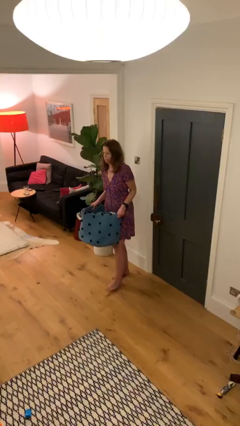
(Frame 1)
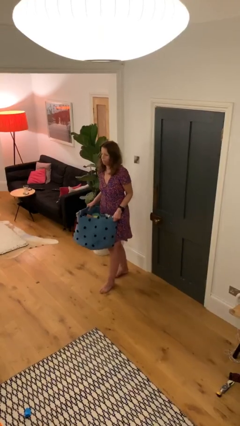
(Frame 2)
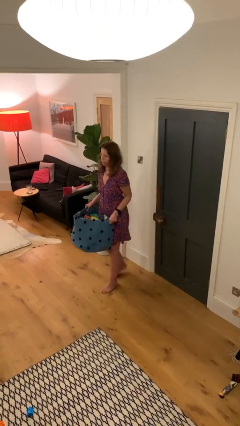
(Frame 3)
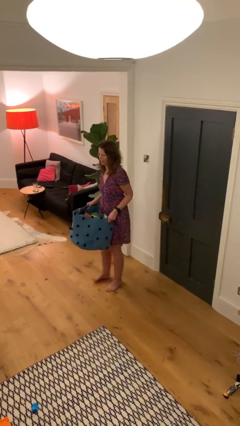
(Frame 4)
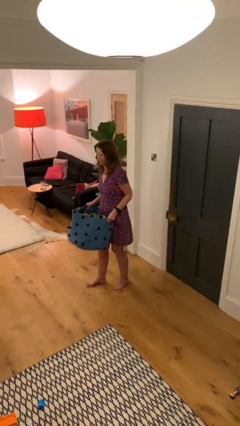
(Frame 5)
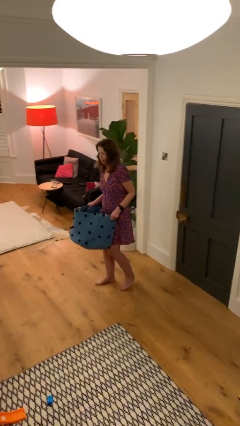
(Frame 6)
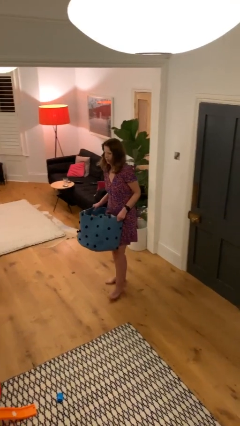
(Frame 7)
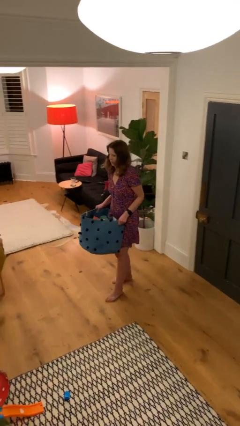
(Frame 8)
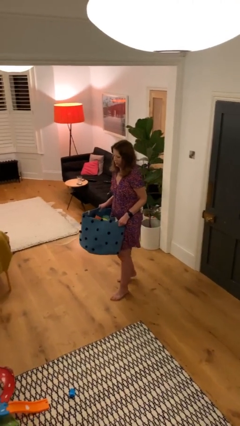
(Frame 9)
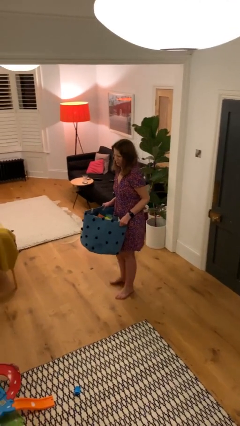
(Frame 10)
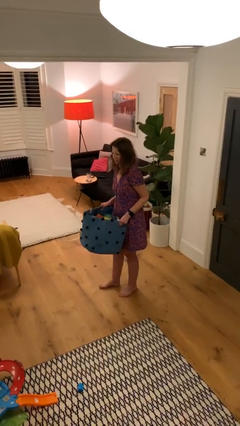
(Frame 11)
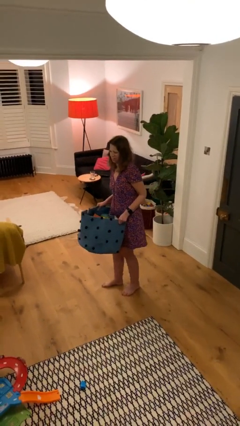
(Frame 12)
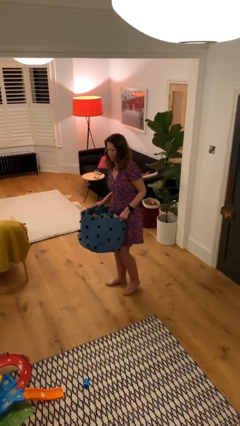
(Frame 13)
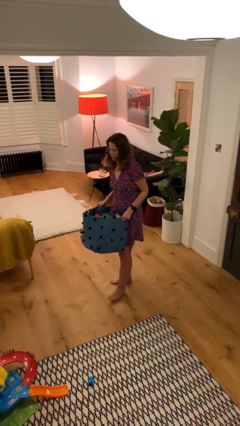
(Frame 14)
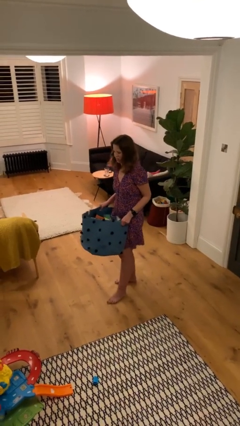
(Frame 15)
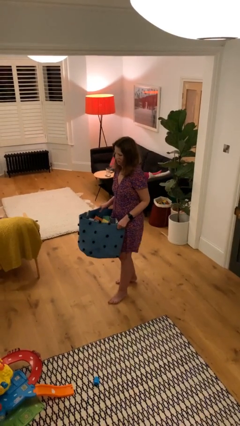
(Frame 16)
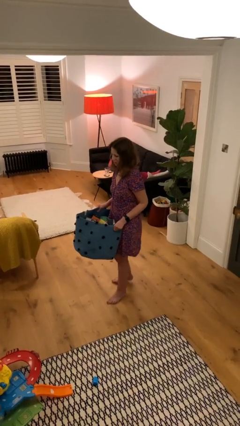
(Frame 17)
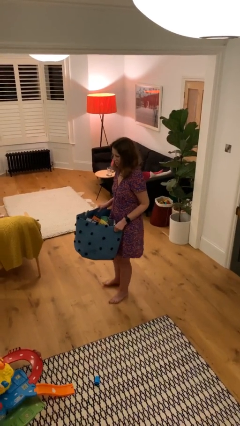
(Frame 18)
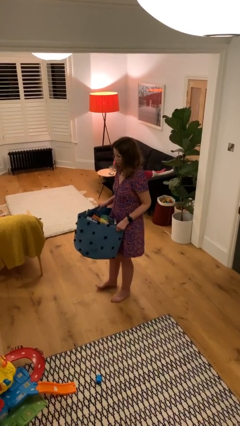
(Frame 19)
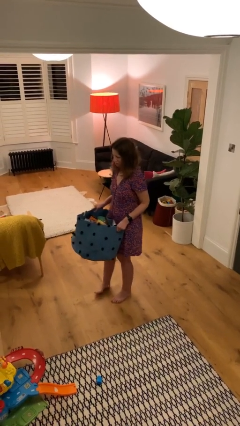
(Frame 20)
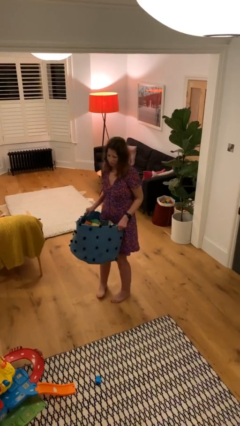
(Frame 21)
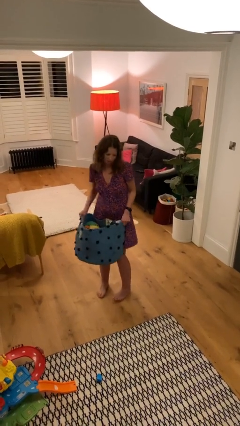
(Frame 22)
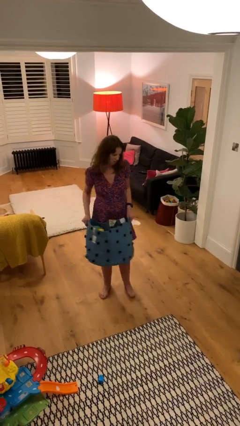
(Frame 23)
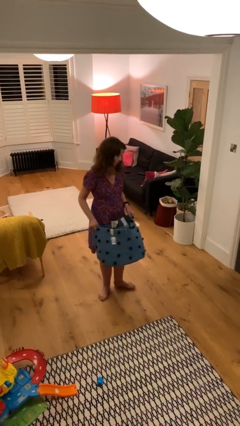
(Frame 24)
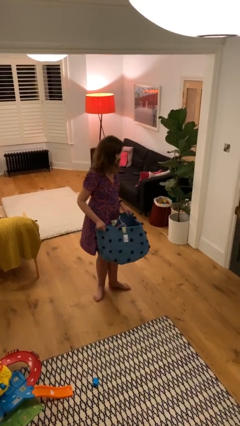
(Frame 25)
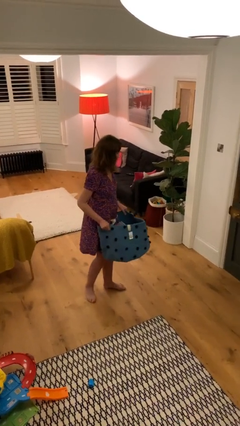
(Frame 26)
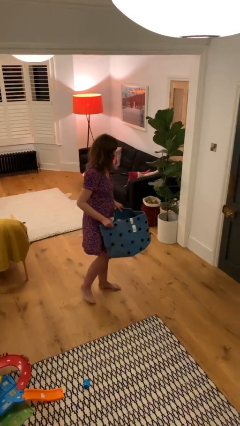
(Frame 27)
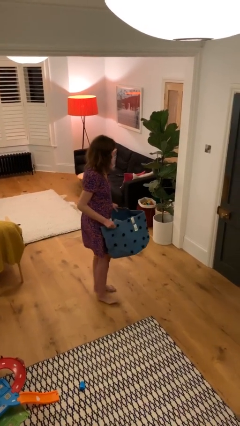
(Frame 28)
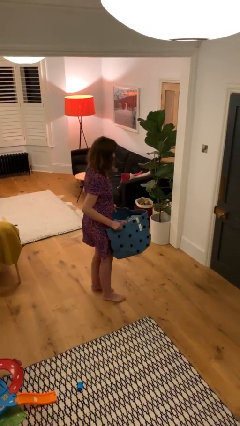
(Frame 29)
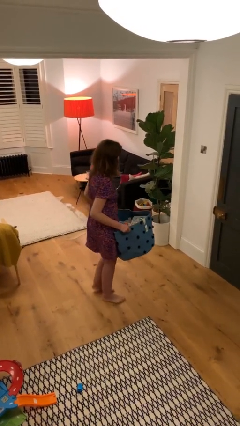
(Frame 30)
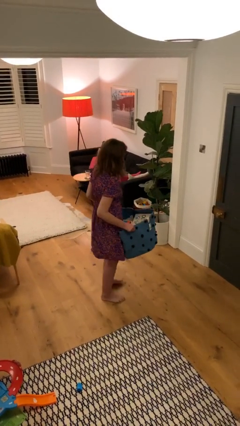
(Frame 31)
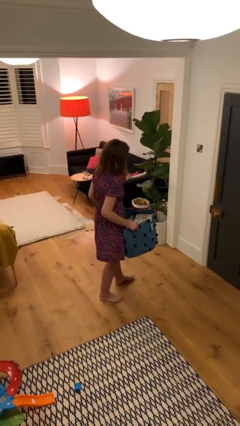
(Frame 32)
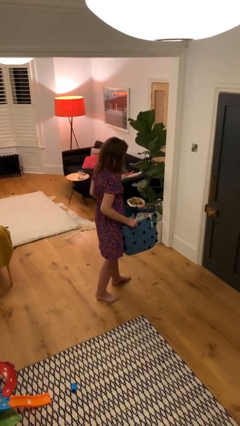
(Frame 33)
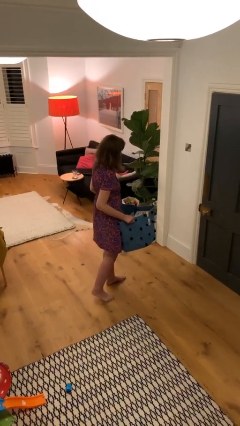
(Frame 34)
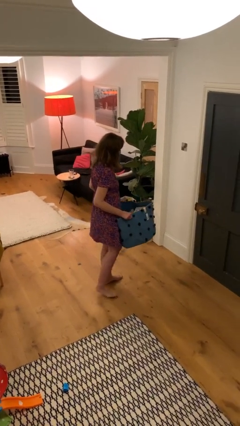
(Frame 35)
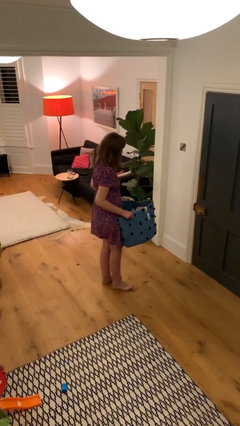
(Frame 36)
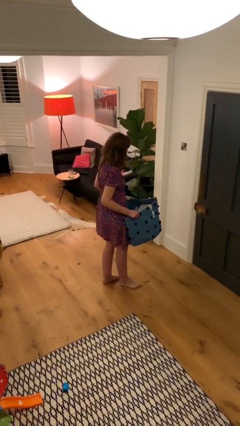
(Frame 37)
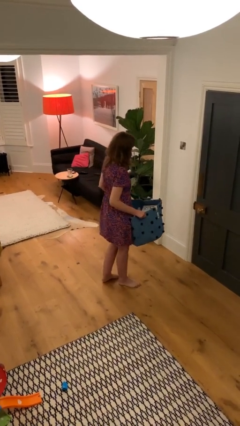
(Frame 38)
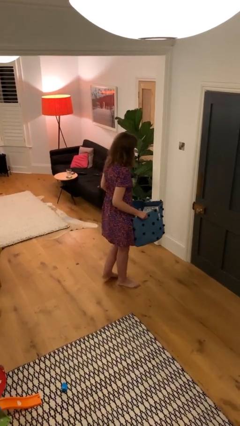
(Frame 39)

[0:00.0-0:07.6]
person carries heavy object

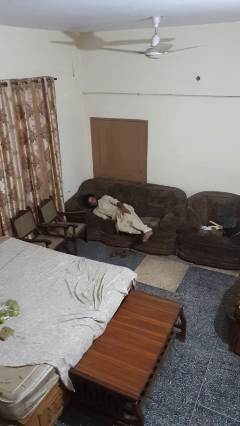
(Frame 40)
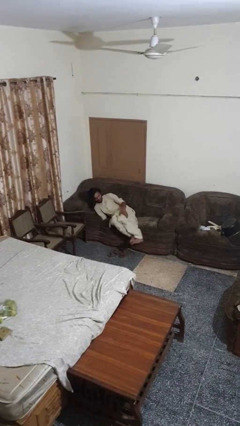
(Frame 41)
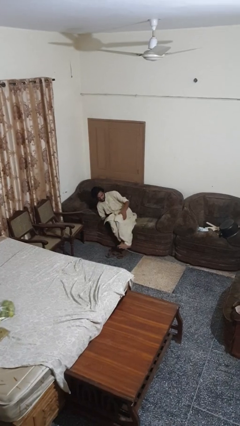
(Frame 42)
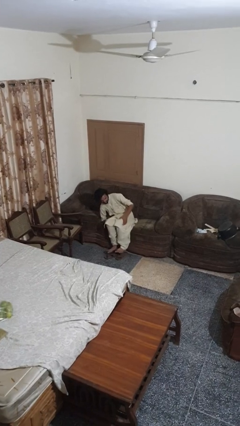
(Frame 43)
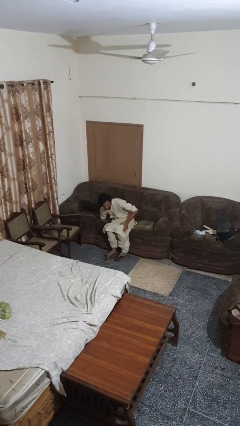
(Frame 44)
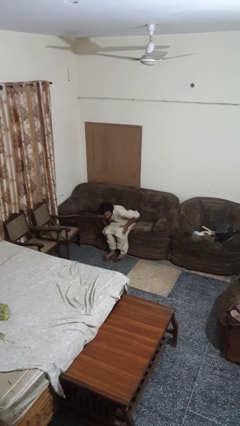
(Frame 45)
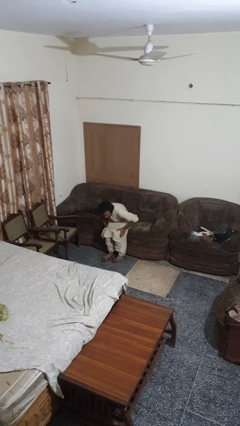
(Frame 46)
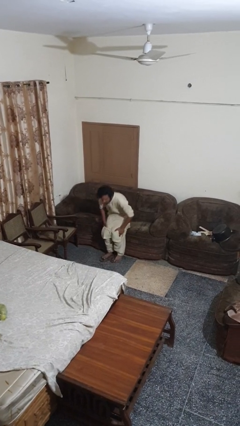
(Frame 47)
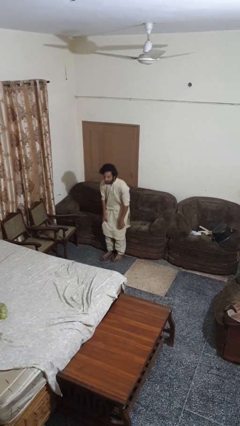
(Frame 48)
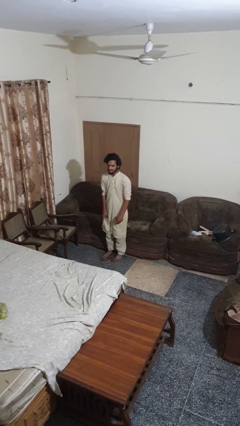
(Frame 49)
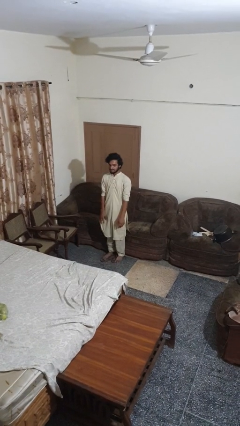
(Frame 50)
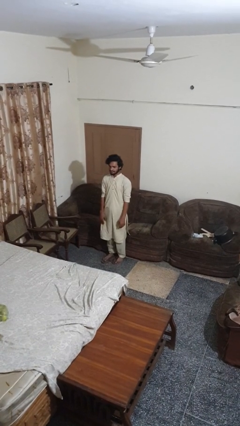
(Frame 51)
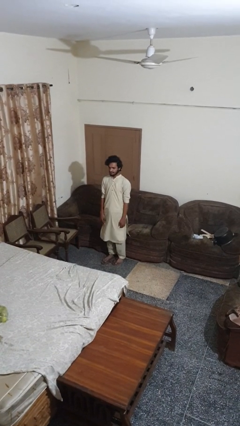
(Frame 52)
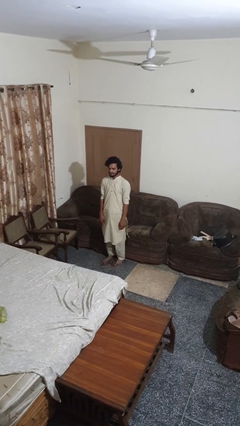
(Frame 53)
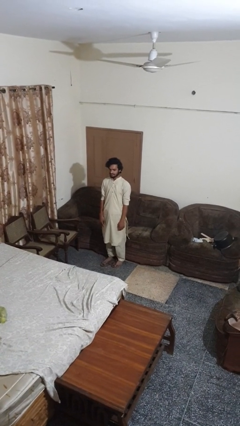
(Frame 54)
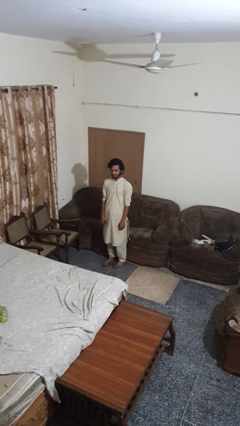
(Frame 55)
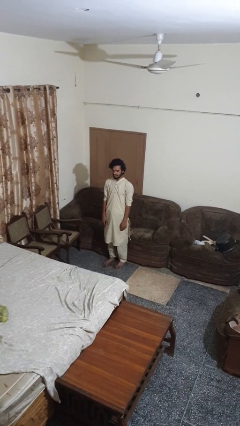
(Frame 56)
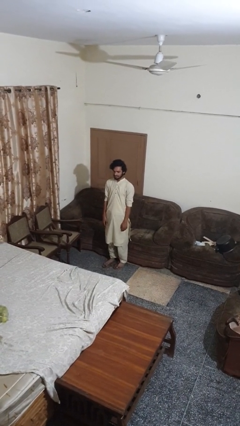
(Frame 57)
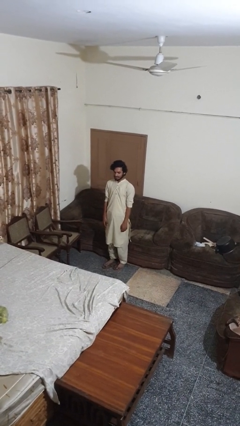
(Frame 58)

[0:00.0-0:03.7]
person stands up

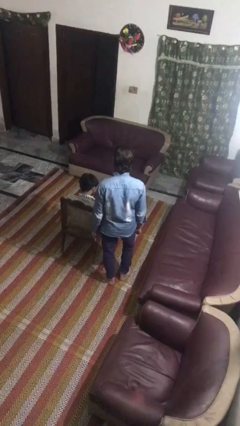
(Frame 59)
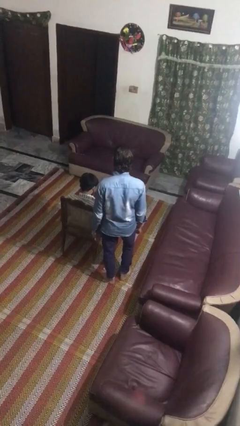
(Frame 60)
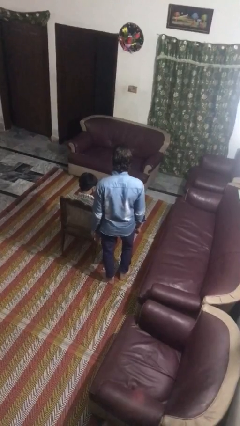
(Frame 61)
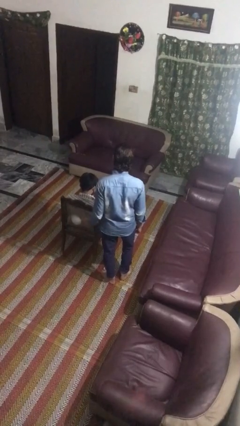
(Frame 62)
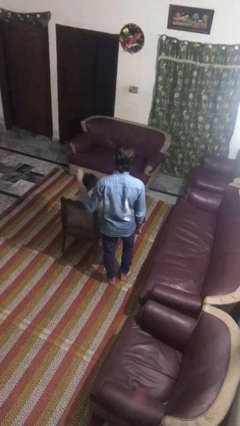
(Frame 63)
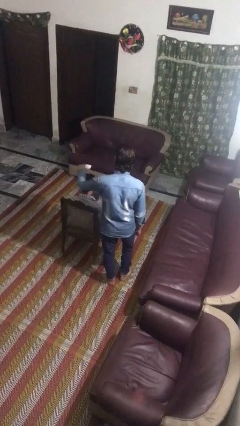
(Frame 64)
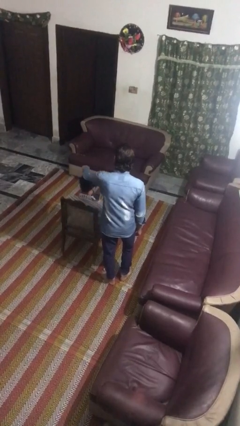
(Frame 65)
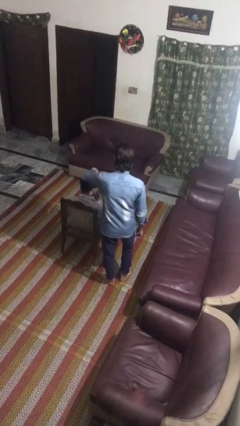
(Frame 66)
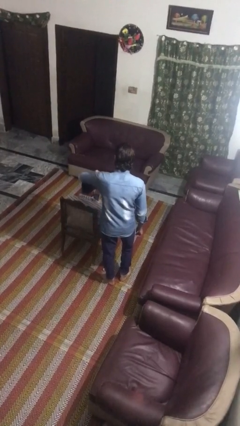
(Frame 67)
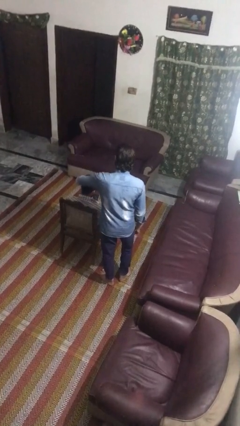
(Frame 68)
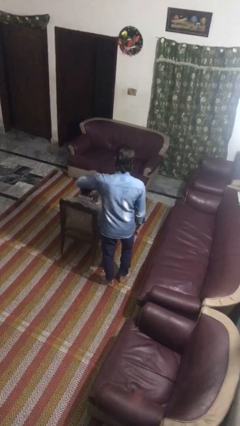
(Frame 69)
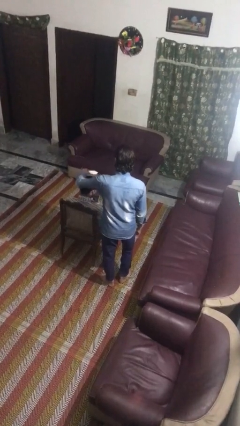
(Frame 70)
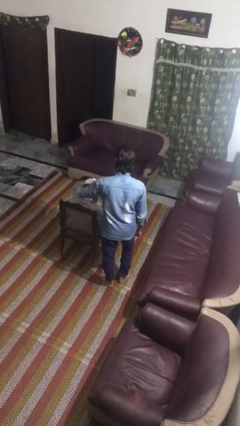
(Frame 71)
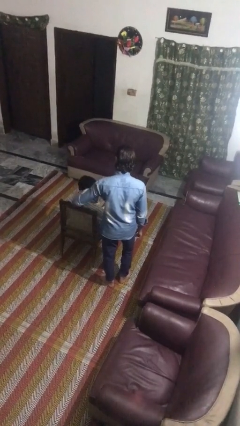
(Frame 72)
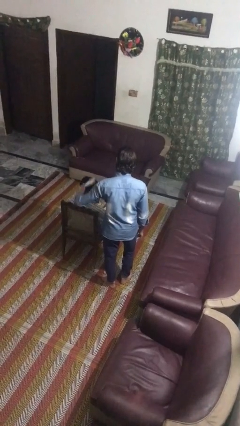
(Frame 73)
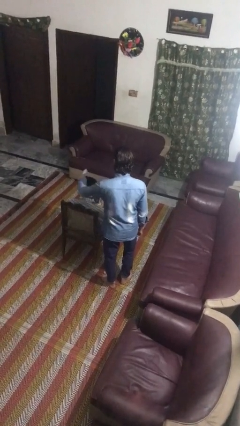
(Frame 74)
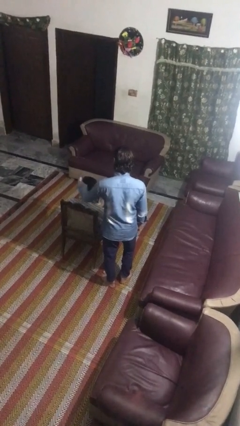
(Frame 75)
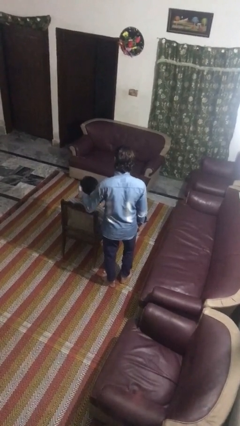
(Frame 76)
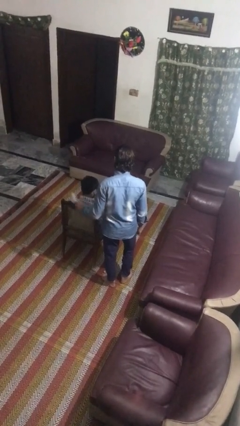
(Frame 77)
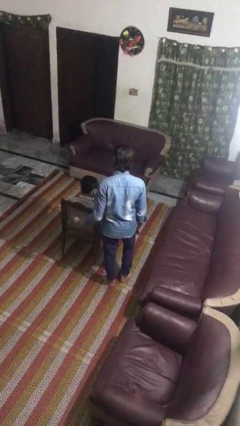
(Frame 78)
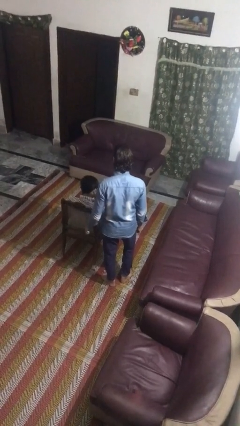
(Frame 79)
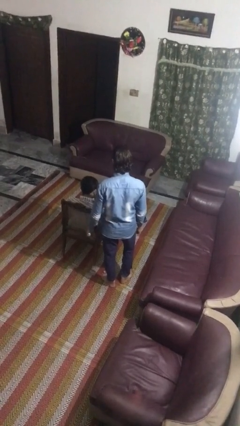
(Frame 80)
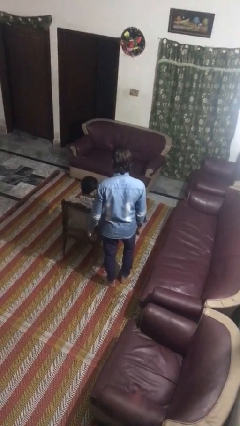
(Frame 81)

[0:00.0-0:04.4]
person brushes hair of person

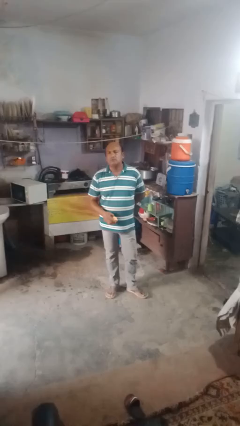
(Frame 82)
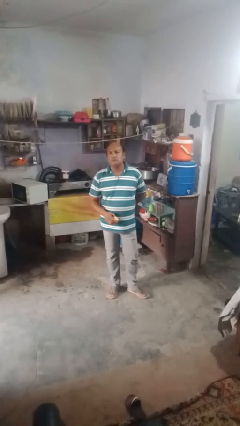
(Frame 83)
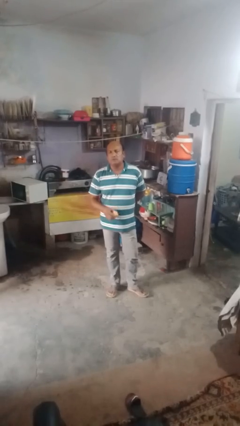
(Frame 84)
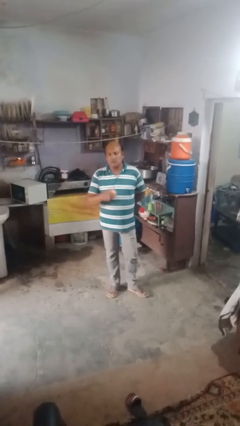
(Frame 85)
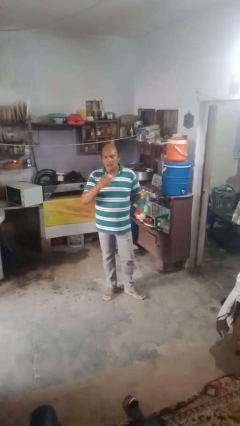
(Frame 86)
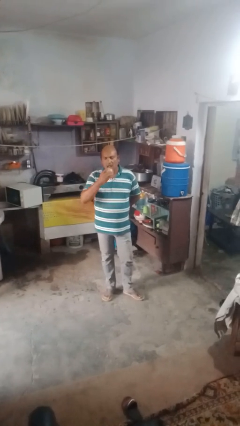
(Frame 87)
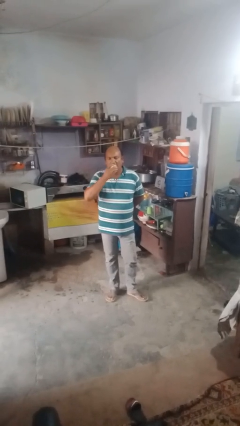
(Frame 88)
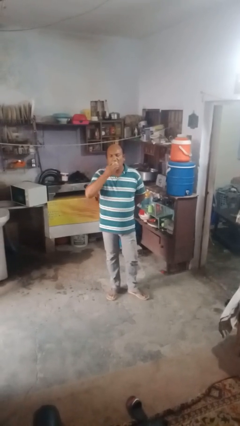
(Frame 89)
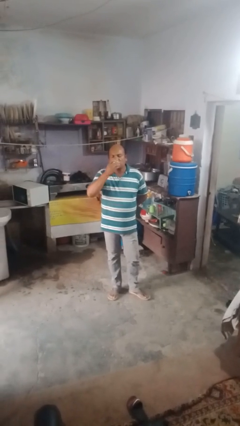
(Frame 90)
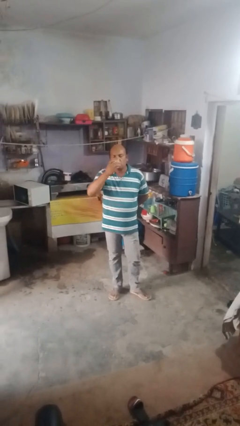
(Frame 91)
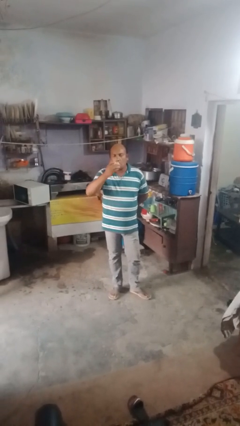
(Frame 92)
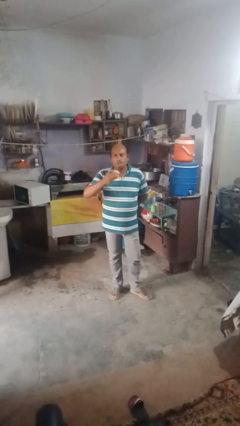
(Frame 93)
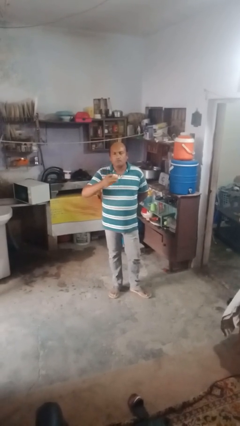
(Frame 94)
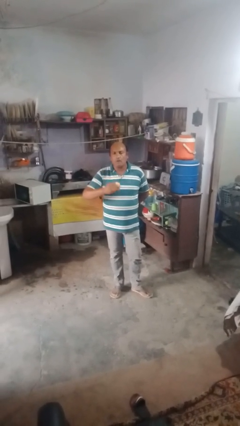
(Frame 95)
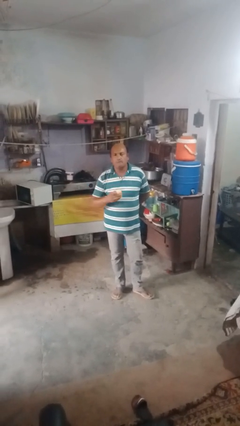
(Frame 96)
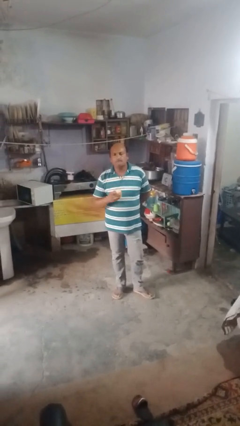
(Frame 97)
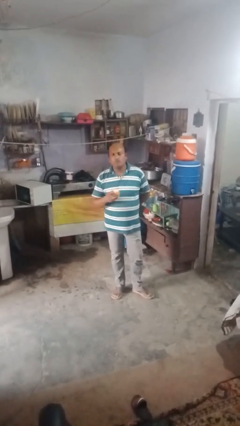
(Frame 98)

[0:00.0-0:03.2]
person eats apple
